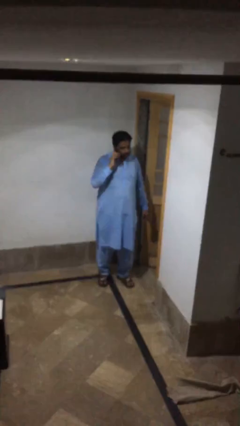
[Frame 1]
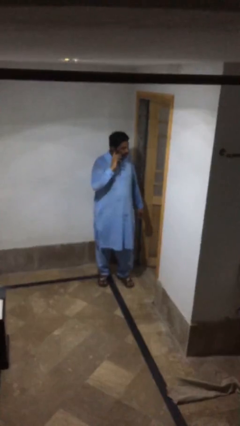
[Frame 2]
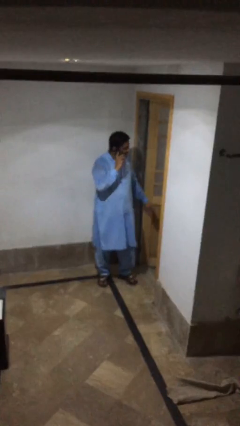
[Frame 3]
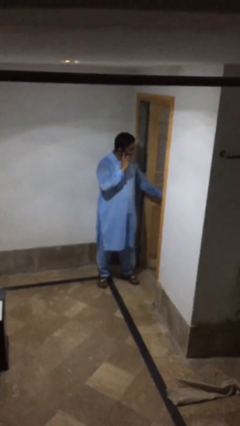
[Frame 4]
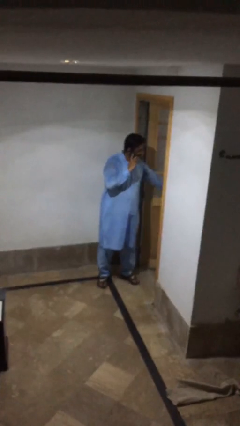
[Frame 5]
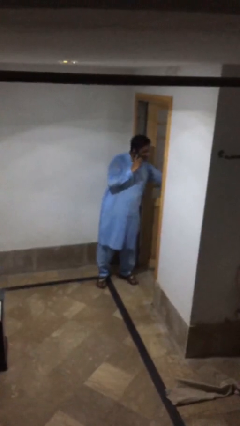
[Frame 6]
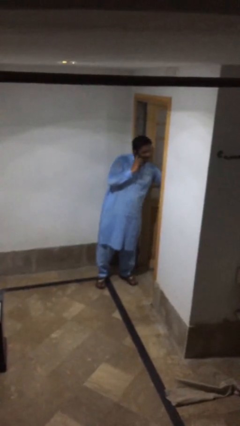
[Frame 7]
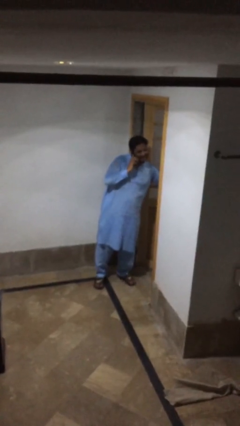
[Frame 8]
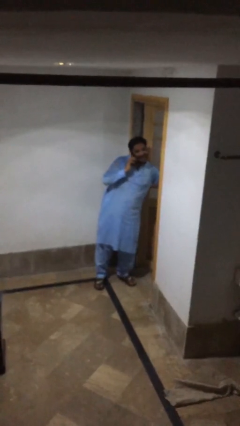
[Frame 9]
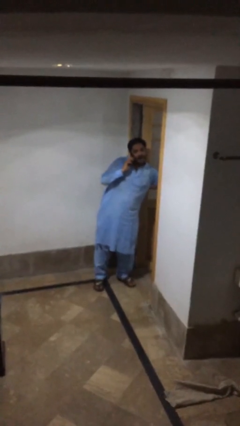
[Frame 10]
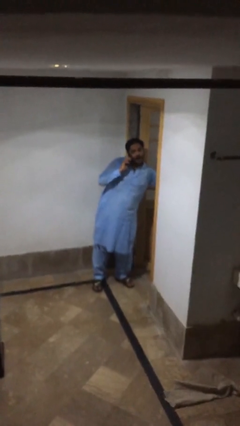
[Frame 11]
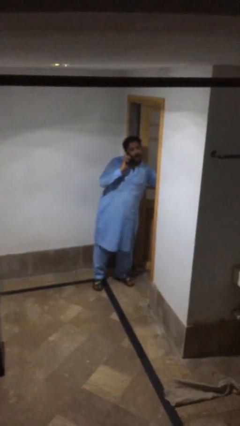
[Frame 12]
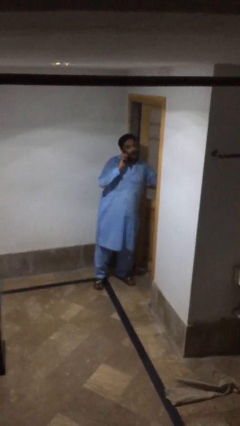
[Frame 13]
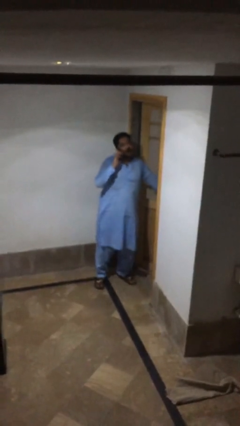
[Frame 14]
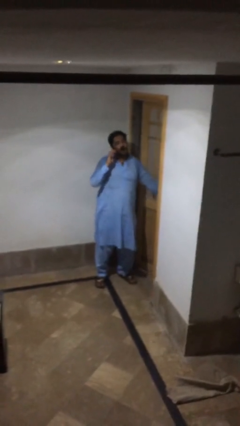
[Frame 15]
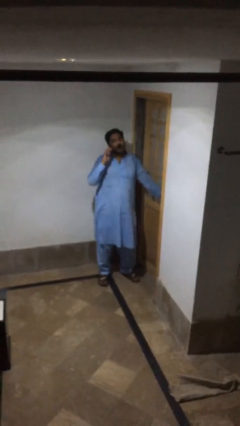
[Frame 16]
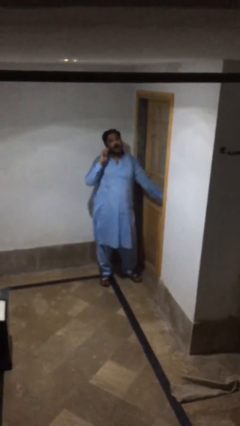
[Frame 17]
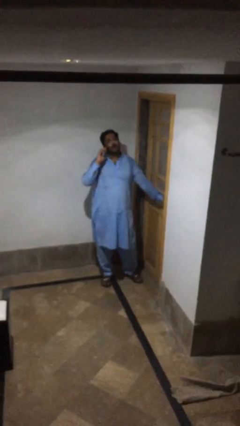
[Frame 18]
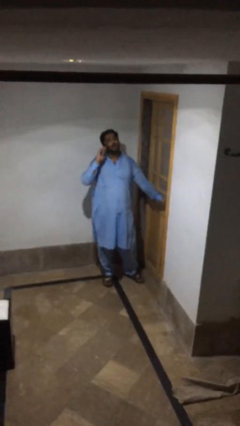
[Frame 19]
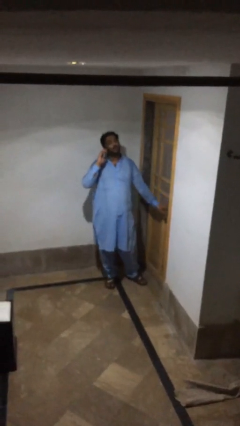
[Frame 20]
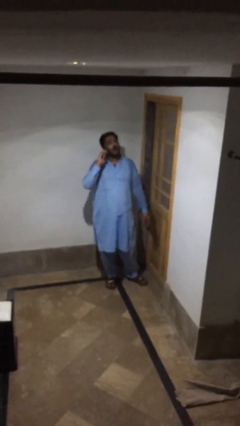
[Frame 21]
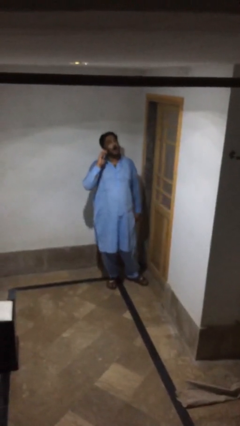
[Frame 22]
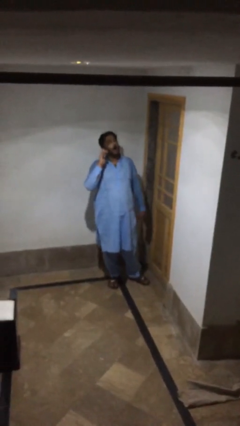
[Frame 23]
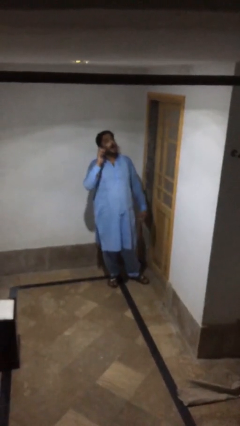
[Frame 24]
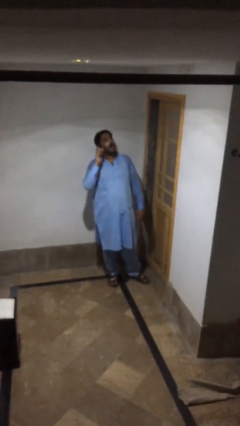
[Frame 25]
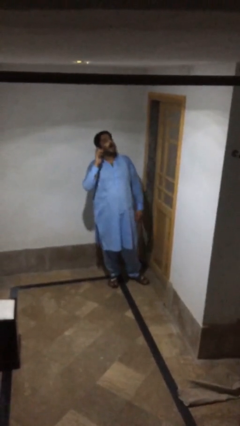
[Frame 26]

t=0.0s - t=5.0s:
person closes facility door

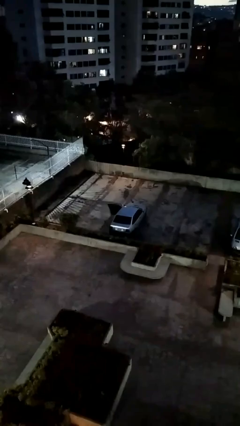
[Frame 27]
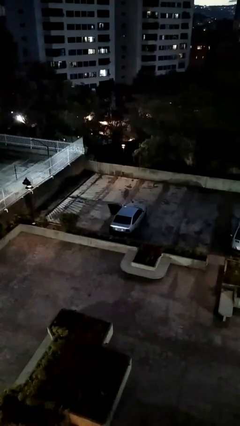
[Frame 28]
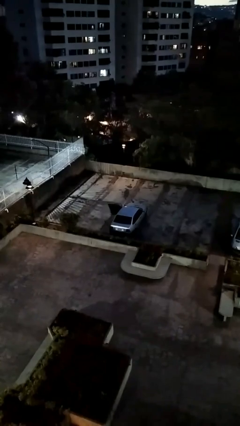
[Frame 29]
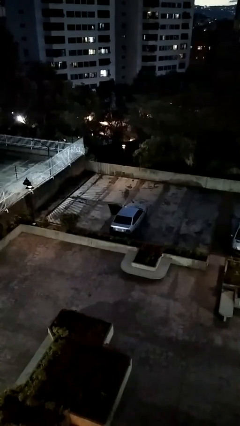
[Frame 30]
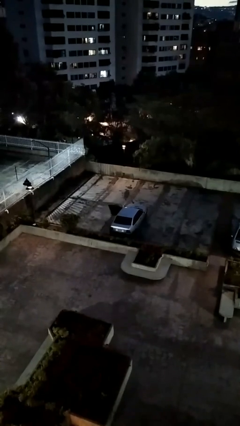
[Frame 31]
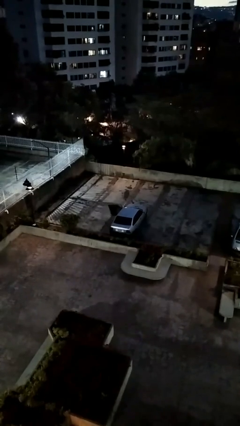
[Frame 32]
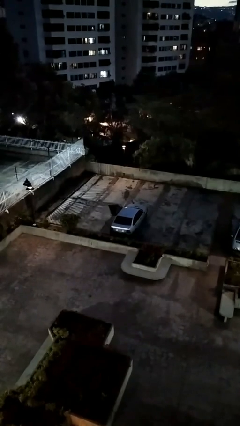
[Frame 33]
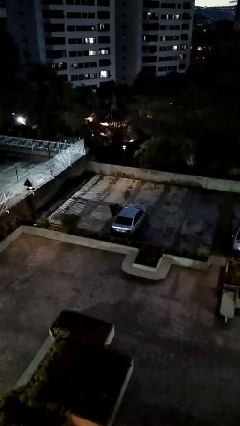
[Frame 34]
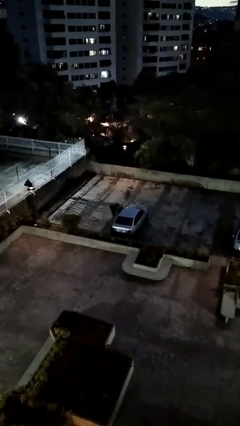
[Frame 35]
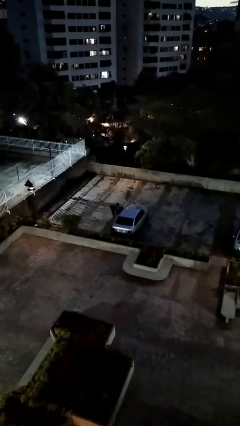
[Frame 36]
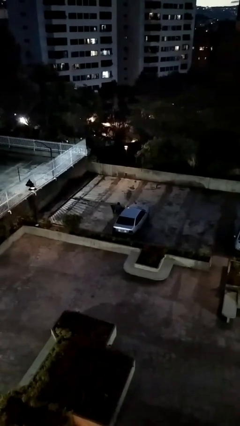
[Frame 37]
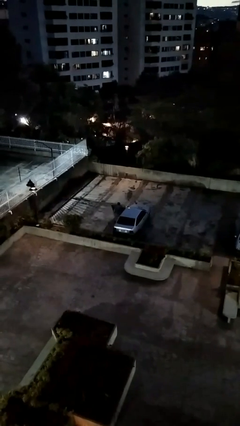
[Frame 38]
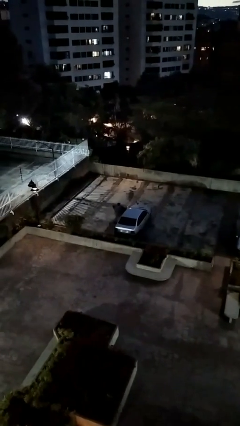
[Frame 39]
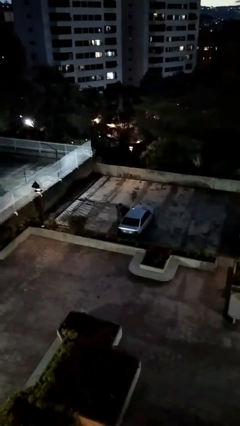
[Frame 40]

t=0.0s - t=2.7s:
person exits car

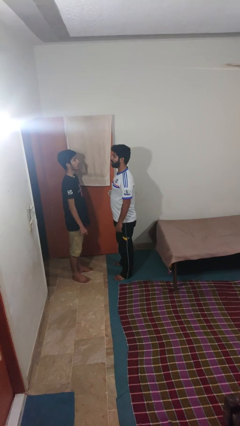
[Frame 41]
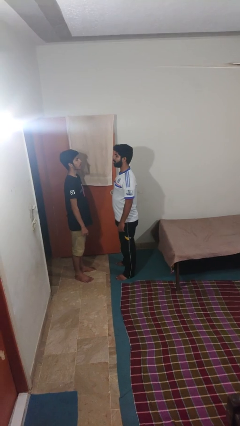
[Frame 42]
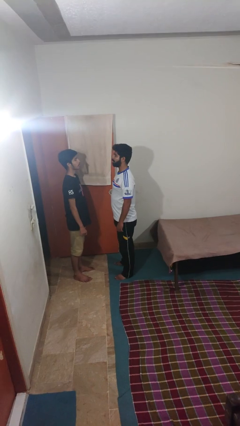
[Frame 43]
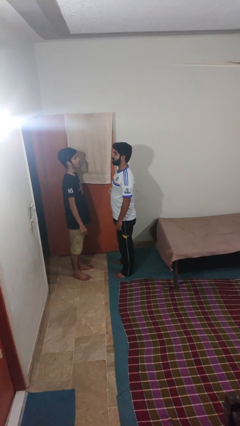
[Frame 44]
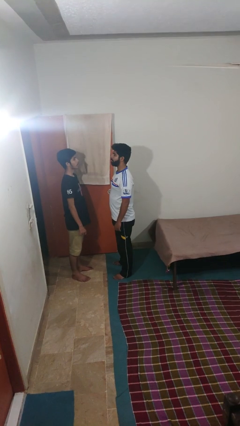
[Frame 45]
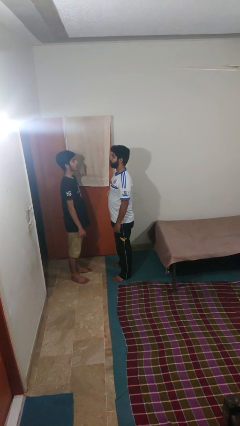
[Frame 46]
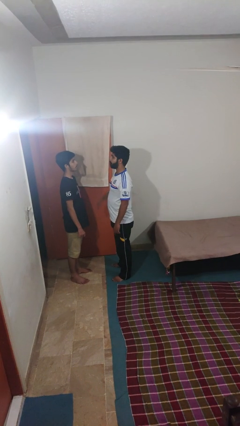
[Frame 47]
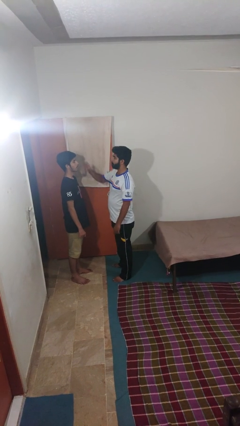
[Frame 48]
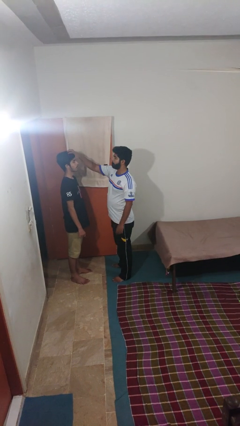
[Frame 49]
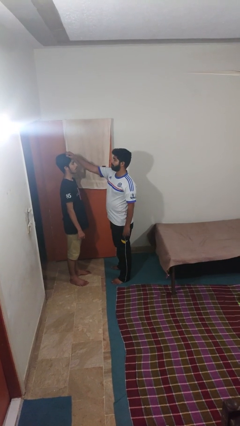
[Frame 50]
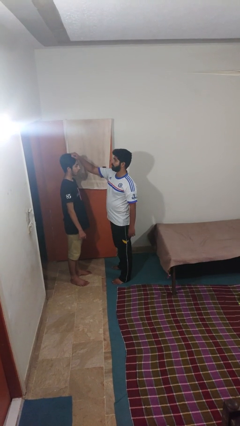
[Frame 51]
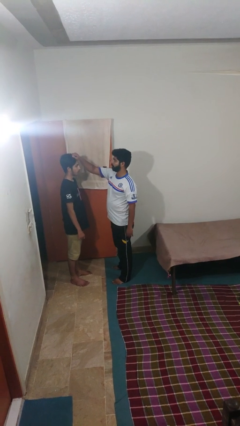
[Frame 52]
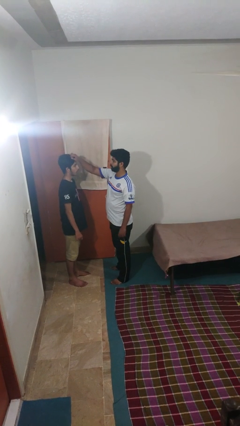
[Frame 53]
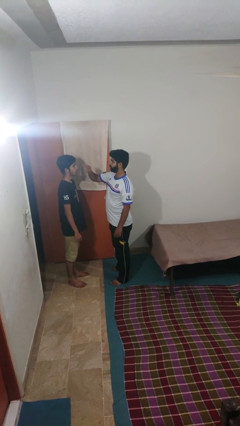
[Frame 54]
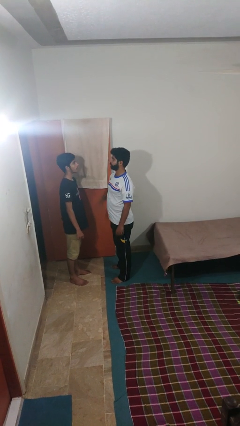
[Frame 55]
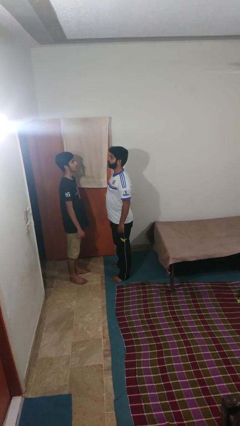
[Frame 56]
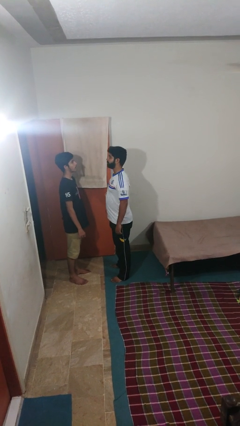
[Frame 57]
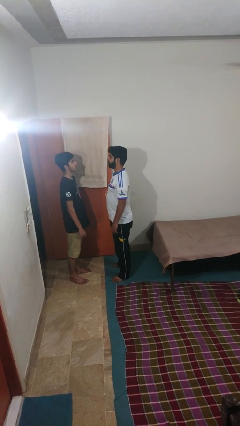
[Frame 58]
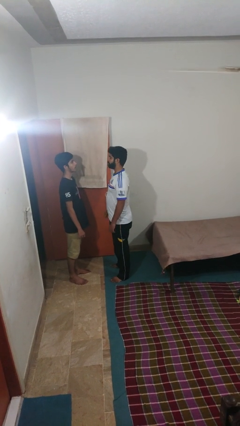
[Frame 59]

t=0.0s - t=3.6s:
person grabs person by hair

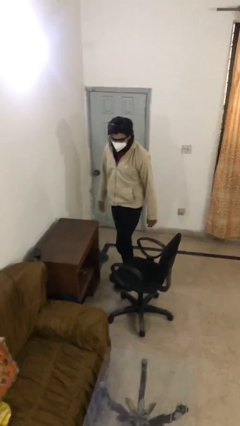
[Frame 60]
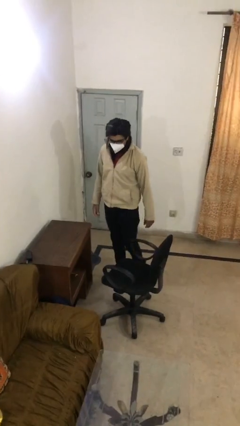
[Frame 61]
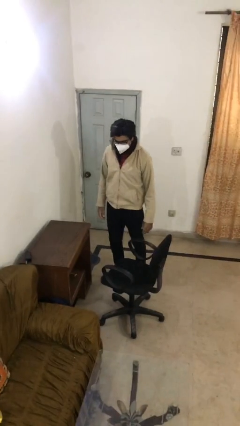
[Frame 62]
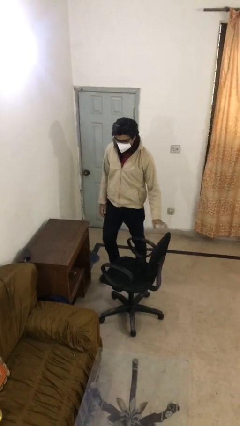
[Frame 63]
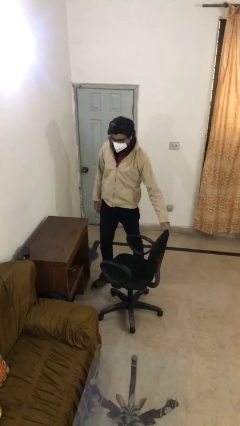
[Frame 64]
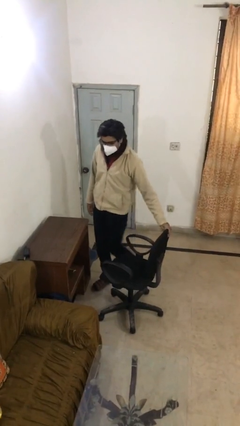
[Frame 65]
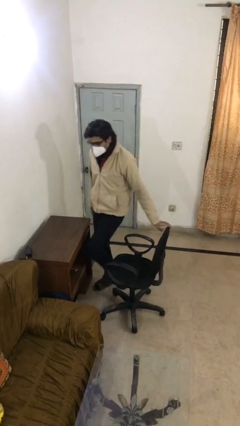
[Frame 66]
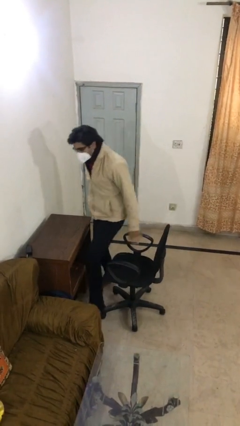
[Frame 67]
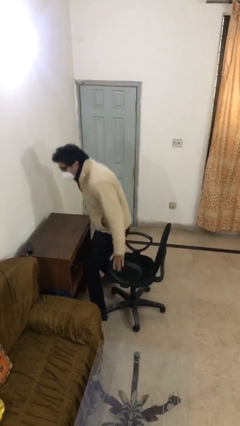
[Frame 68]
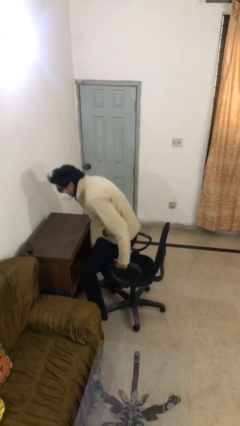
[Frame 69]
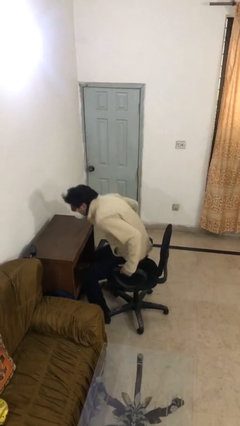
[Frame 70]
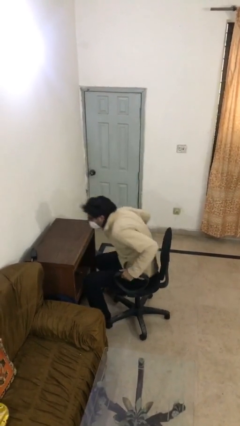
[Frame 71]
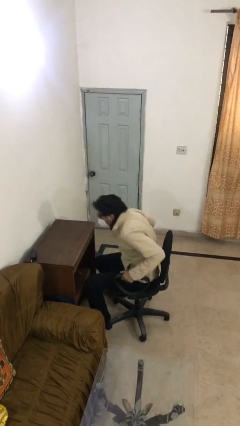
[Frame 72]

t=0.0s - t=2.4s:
person sits down

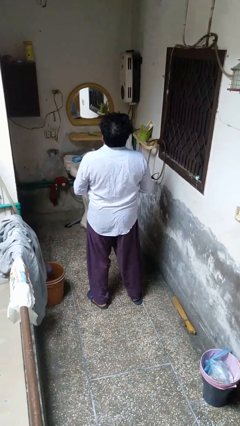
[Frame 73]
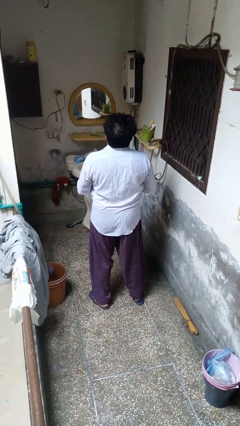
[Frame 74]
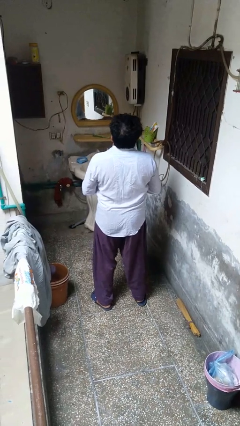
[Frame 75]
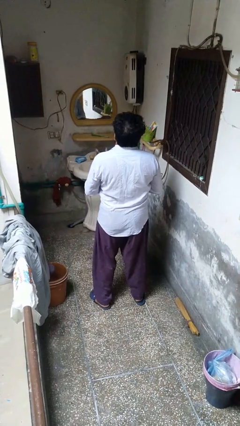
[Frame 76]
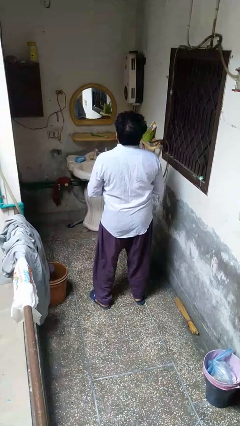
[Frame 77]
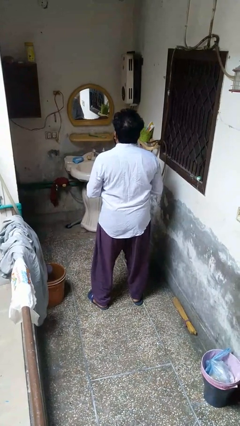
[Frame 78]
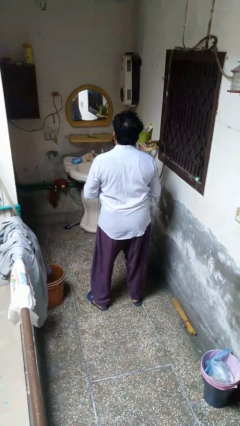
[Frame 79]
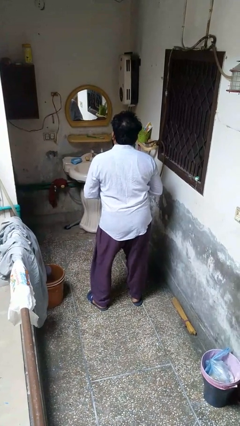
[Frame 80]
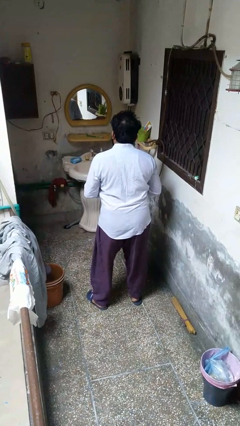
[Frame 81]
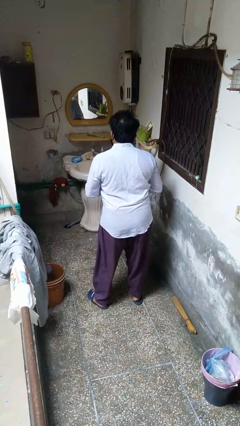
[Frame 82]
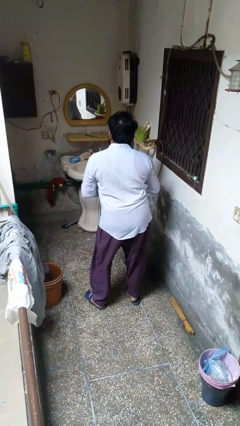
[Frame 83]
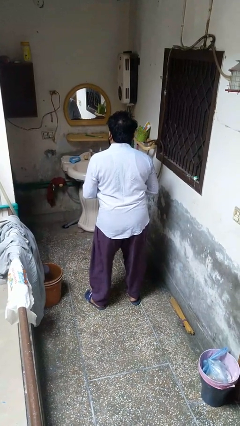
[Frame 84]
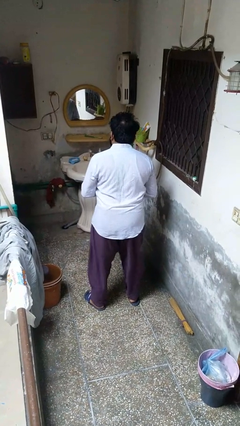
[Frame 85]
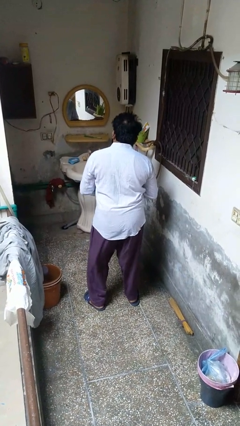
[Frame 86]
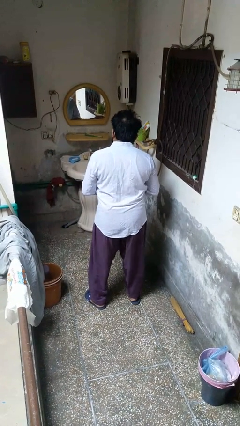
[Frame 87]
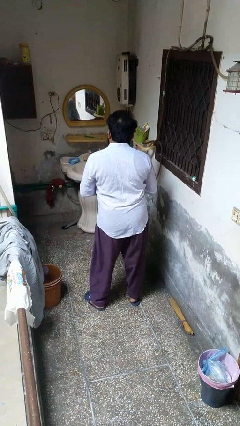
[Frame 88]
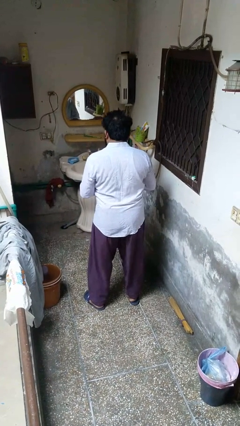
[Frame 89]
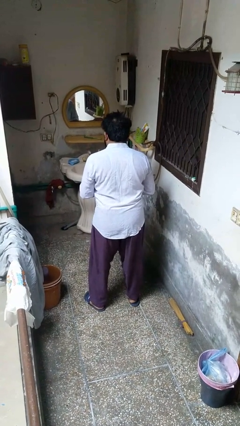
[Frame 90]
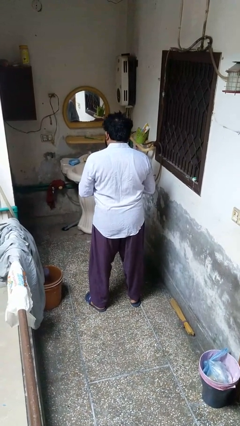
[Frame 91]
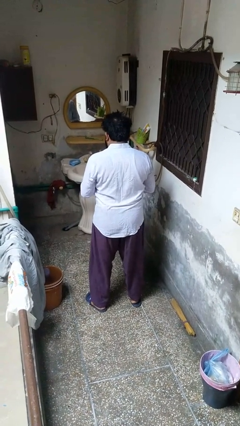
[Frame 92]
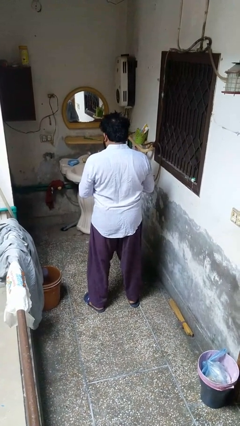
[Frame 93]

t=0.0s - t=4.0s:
person wiggles hips

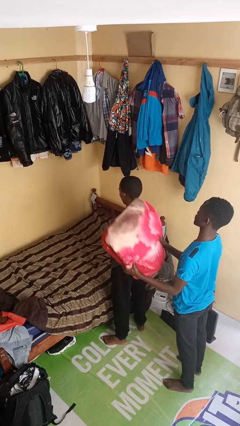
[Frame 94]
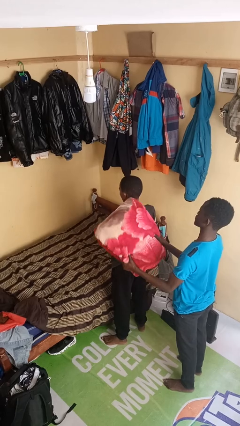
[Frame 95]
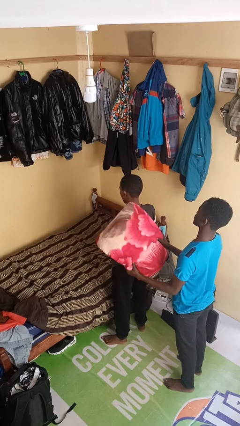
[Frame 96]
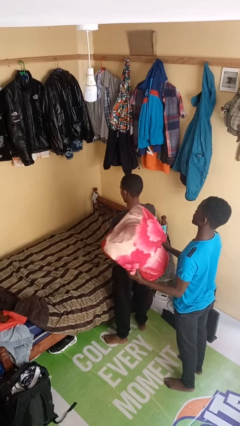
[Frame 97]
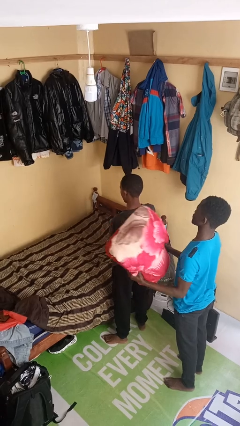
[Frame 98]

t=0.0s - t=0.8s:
person hits person with pillow
